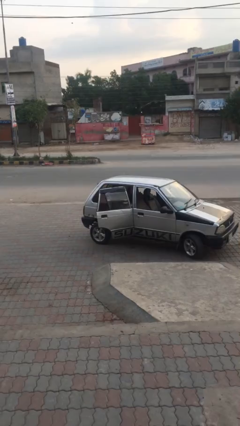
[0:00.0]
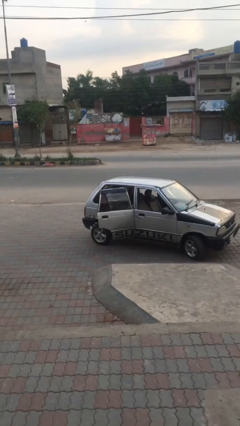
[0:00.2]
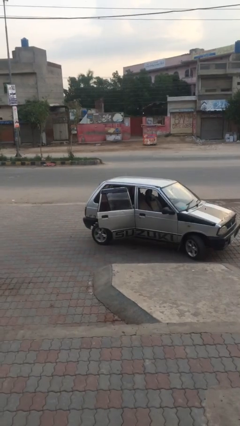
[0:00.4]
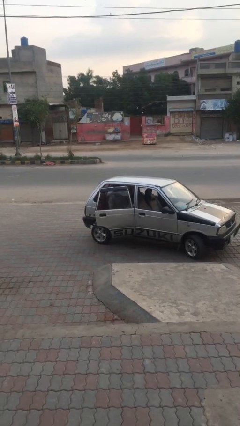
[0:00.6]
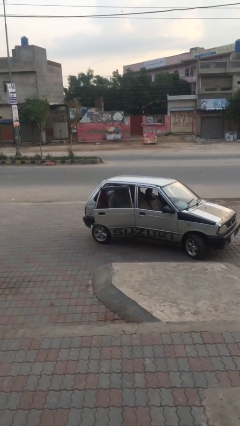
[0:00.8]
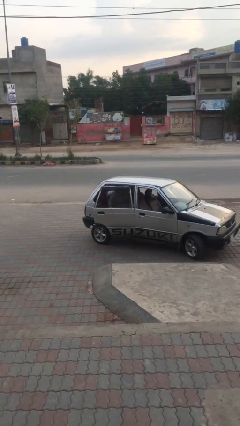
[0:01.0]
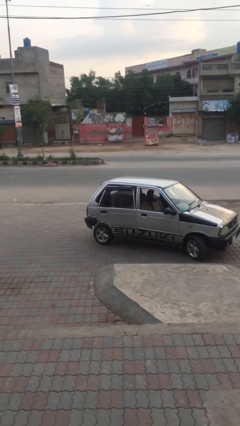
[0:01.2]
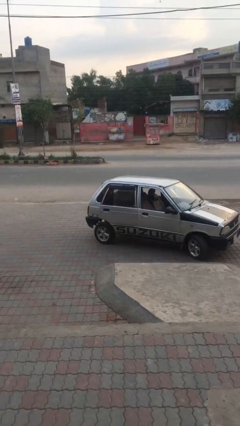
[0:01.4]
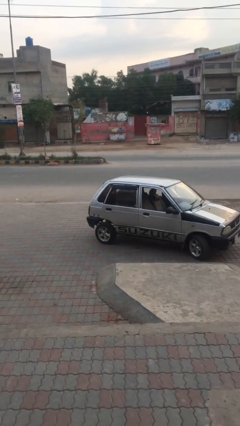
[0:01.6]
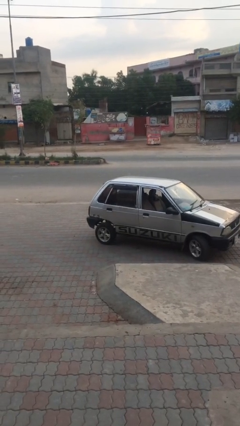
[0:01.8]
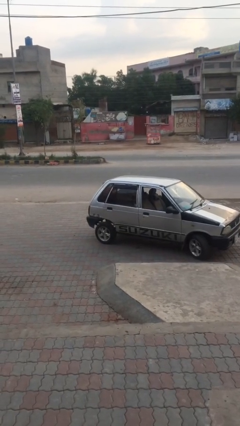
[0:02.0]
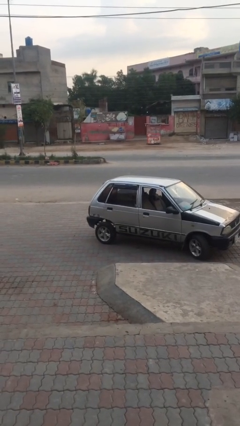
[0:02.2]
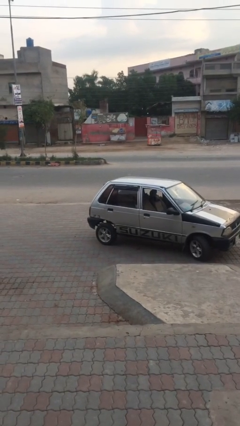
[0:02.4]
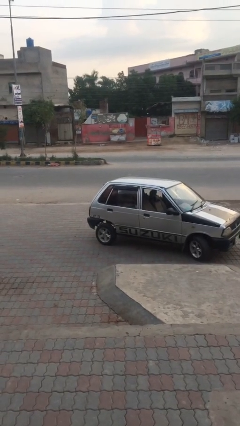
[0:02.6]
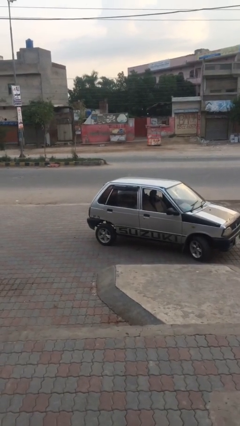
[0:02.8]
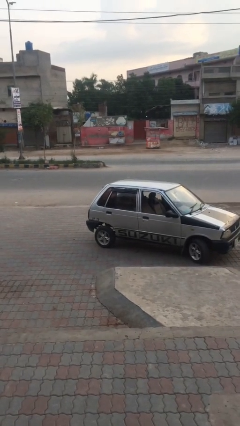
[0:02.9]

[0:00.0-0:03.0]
person closes car door

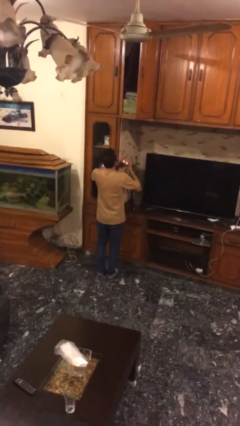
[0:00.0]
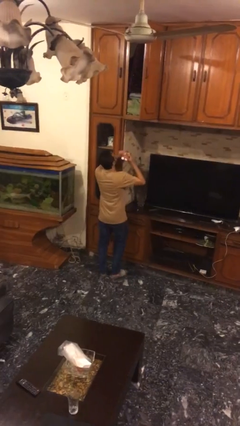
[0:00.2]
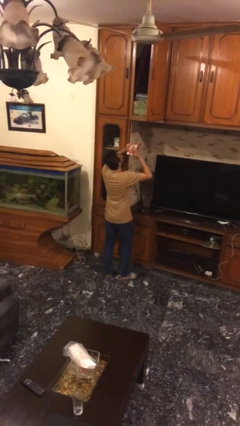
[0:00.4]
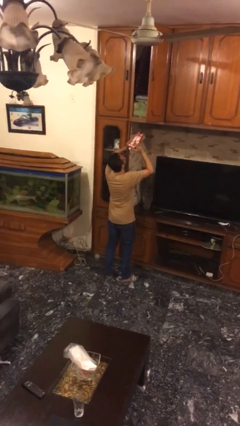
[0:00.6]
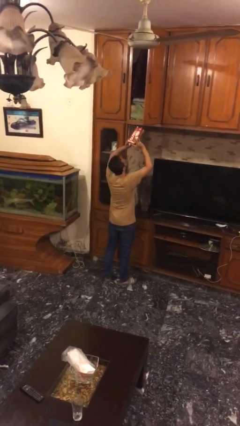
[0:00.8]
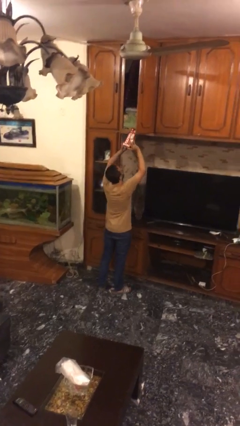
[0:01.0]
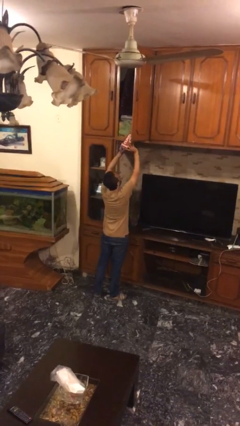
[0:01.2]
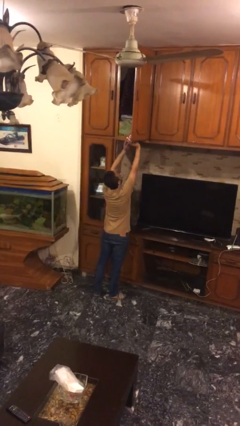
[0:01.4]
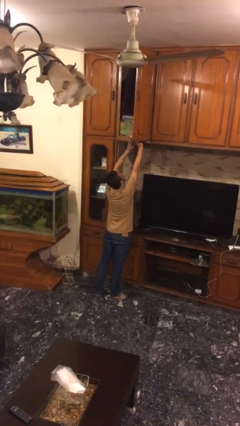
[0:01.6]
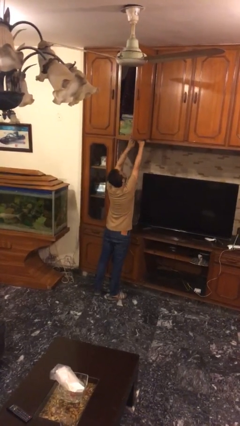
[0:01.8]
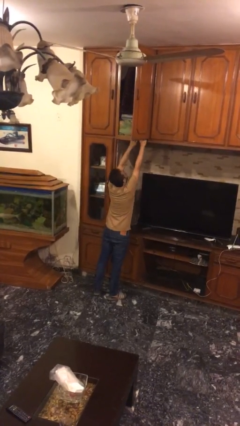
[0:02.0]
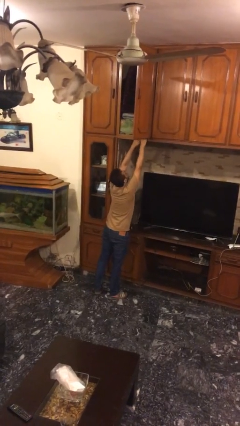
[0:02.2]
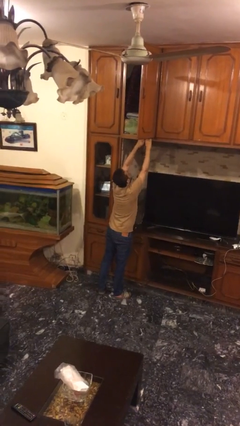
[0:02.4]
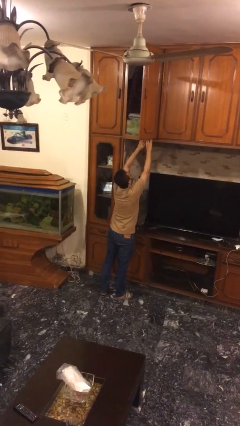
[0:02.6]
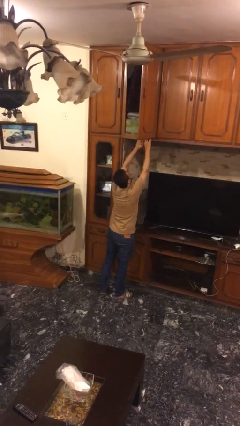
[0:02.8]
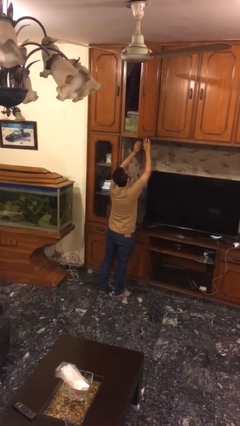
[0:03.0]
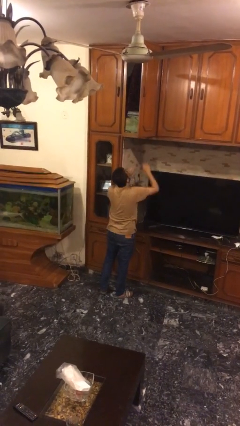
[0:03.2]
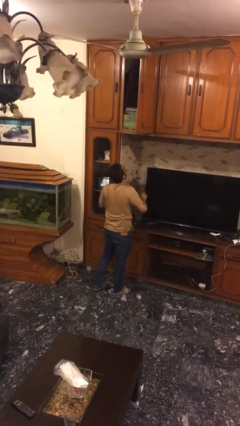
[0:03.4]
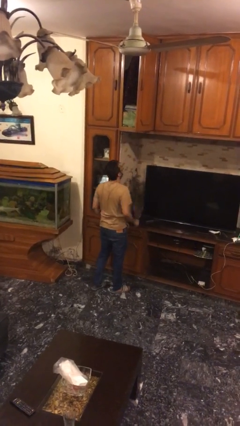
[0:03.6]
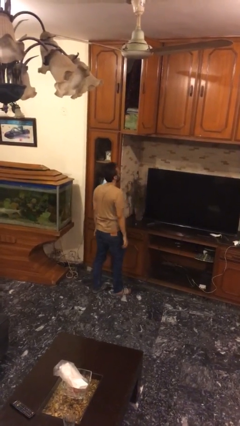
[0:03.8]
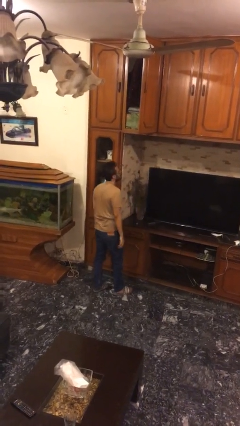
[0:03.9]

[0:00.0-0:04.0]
person puts down object on shelf

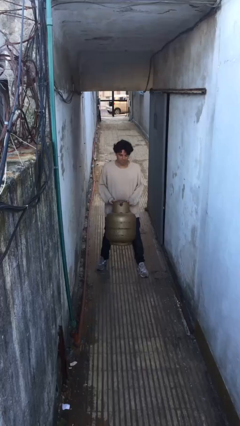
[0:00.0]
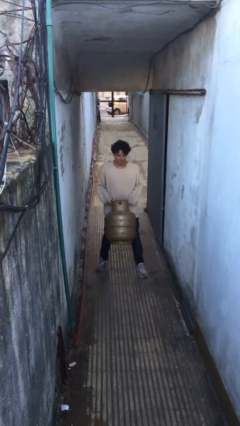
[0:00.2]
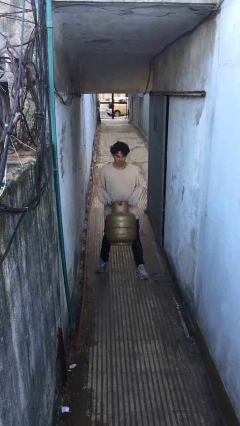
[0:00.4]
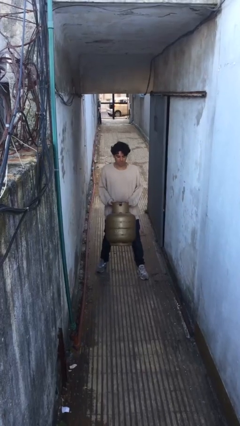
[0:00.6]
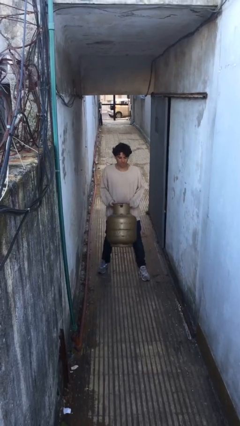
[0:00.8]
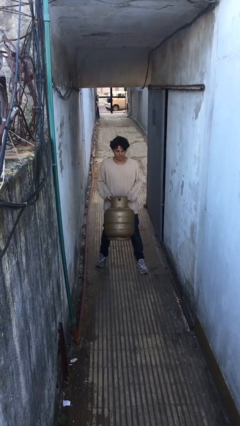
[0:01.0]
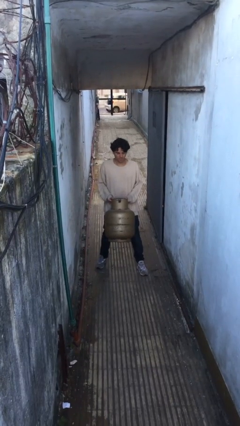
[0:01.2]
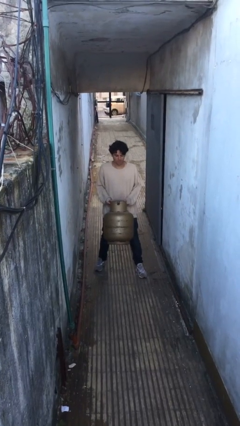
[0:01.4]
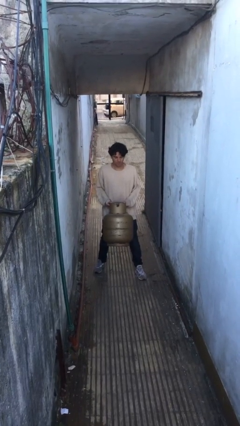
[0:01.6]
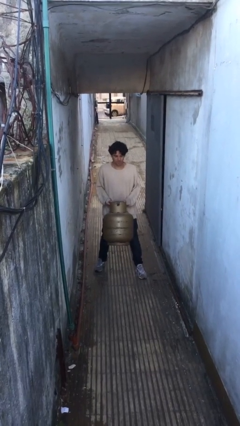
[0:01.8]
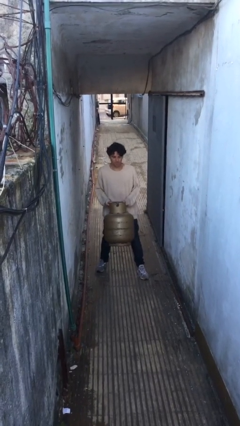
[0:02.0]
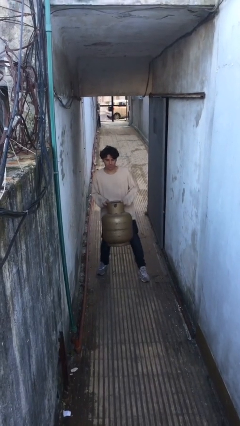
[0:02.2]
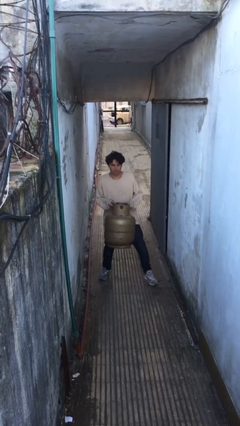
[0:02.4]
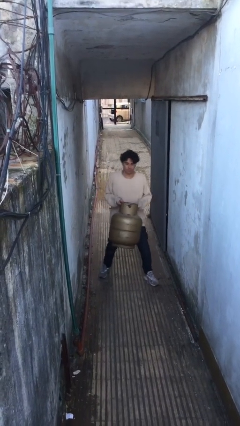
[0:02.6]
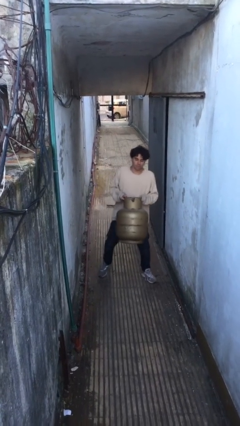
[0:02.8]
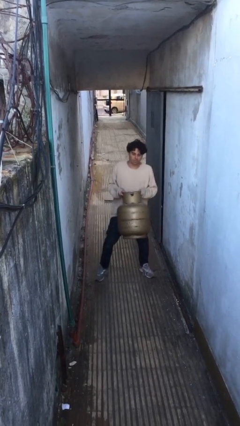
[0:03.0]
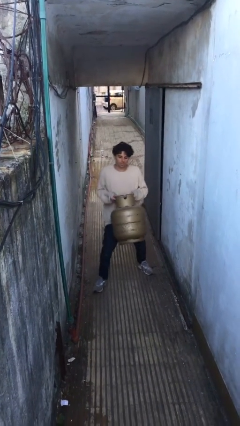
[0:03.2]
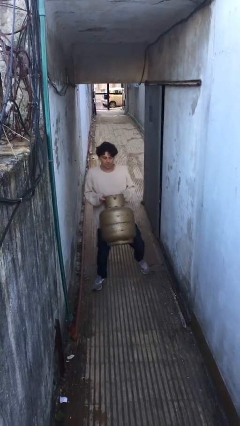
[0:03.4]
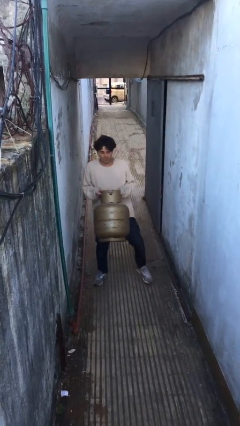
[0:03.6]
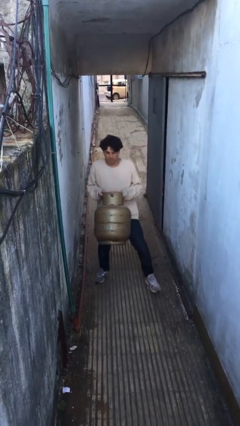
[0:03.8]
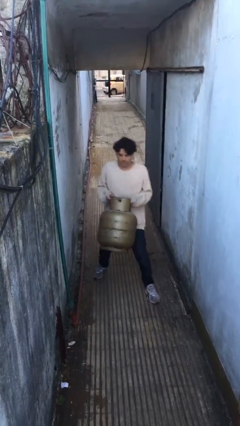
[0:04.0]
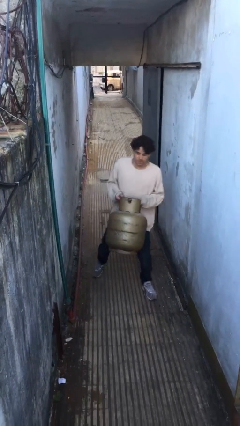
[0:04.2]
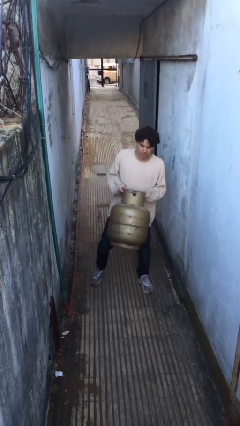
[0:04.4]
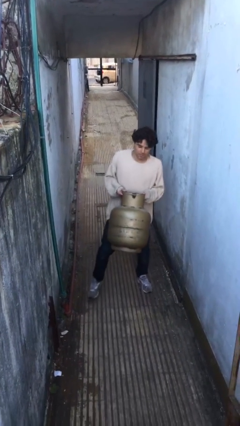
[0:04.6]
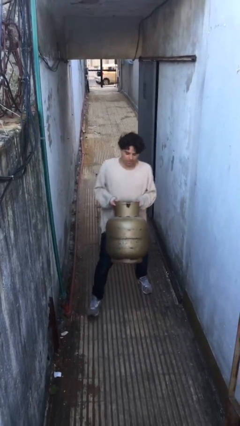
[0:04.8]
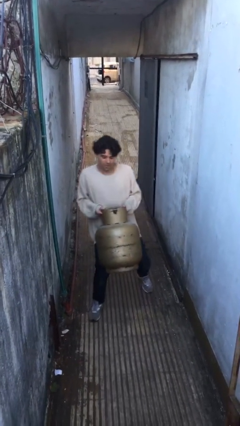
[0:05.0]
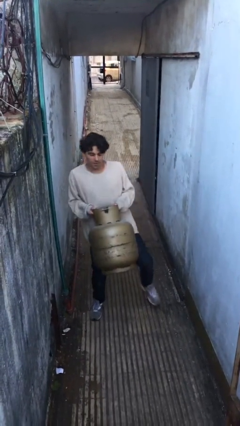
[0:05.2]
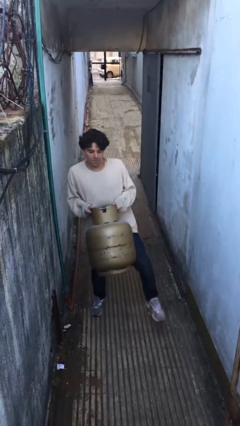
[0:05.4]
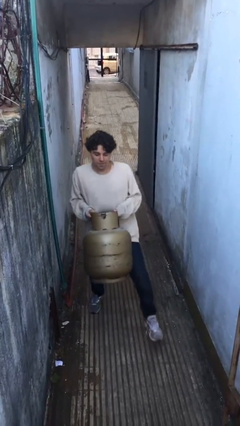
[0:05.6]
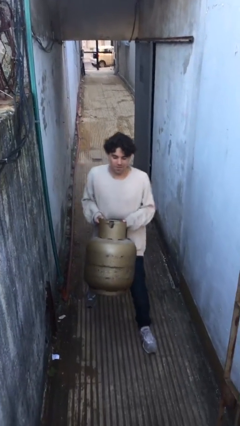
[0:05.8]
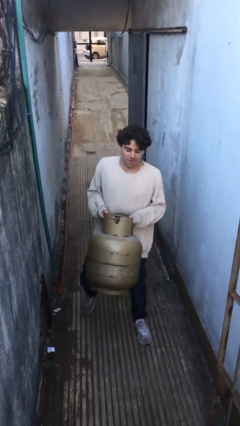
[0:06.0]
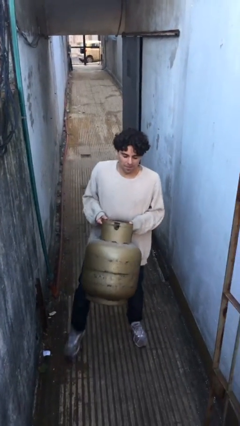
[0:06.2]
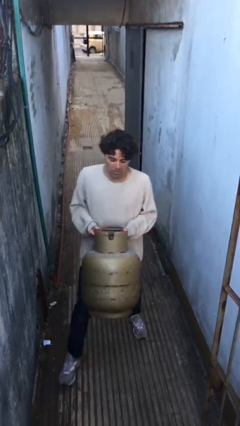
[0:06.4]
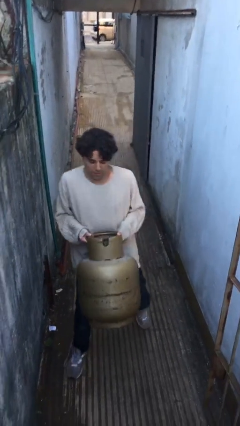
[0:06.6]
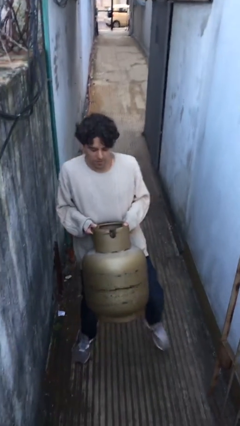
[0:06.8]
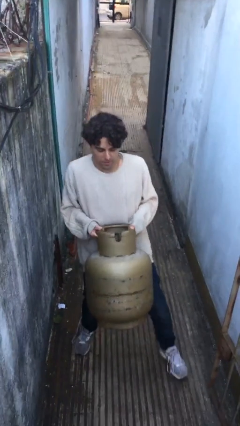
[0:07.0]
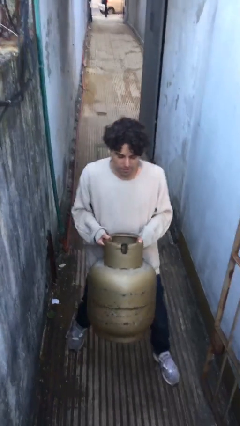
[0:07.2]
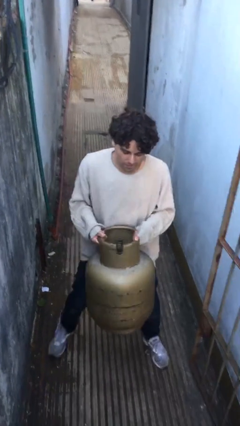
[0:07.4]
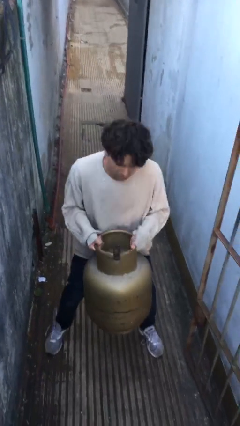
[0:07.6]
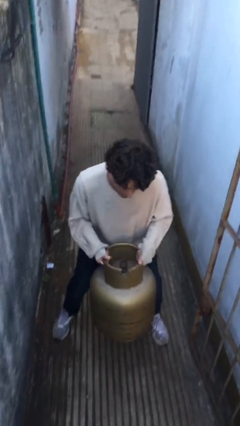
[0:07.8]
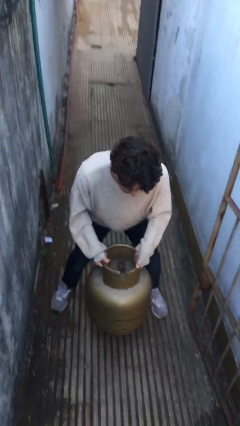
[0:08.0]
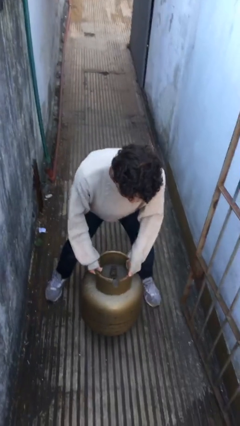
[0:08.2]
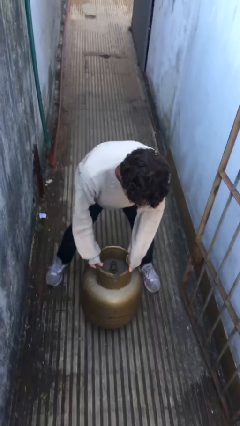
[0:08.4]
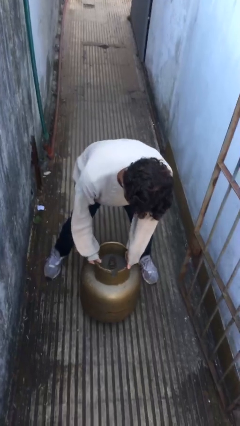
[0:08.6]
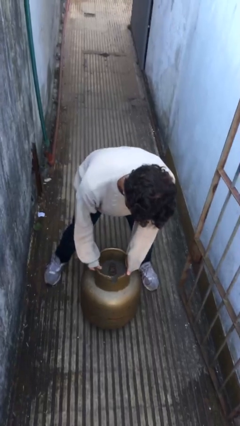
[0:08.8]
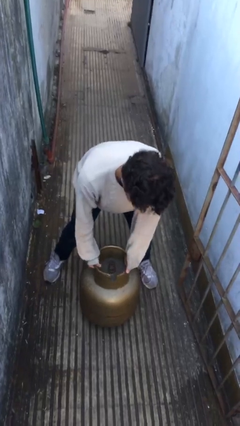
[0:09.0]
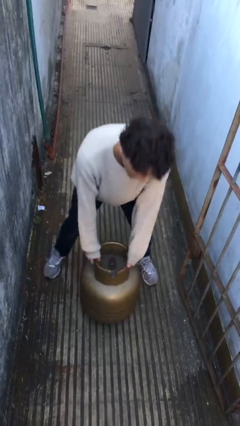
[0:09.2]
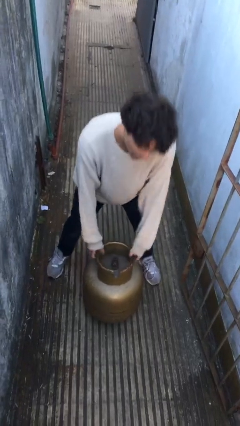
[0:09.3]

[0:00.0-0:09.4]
person puts down object on floor

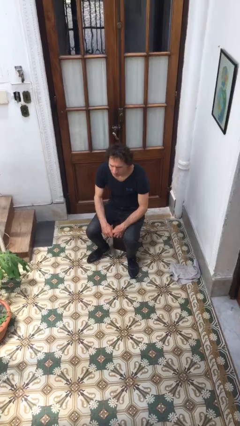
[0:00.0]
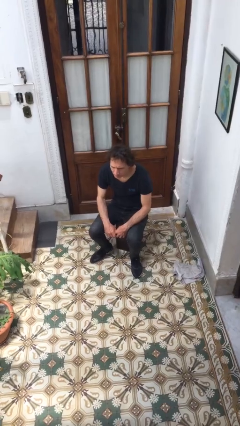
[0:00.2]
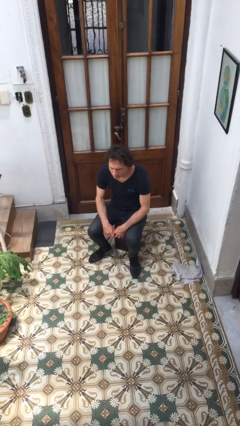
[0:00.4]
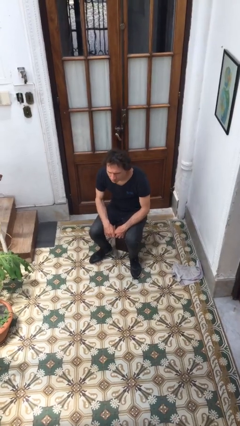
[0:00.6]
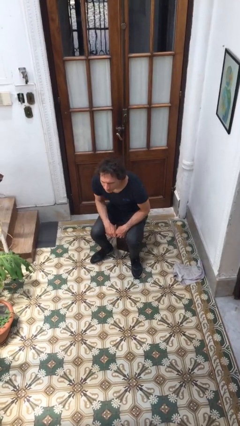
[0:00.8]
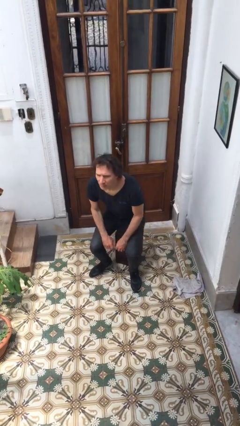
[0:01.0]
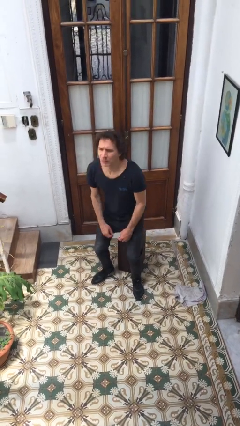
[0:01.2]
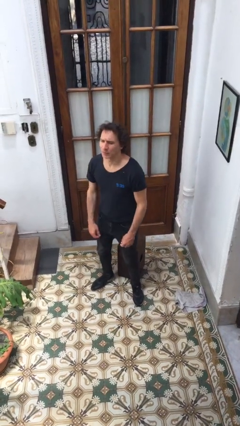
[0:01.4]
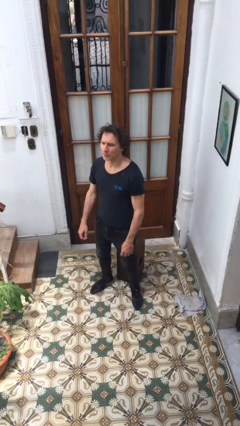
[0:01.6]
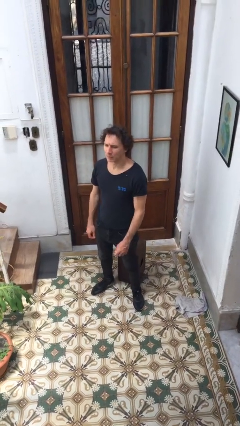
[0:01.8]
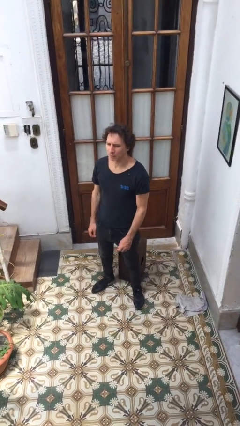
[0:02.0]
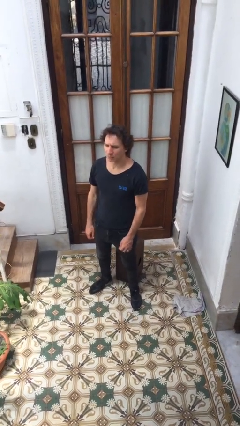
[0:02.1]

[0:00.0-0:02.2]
person stands up
